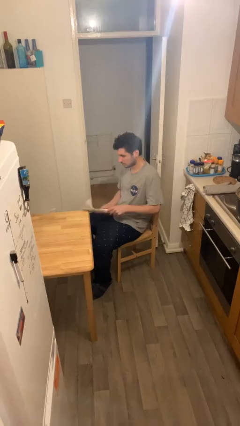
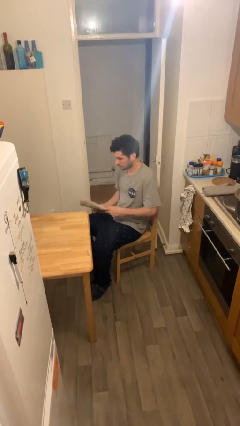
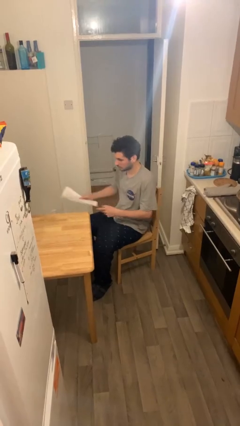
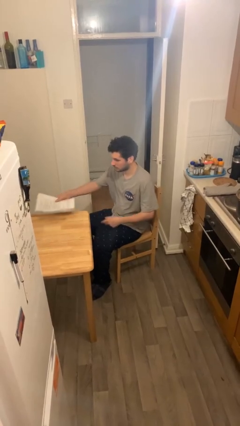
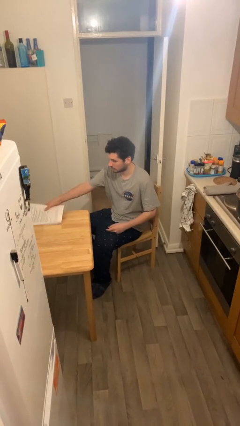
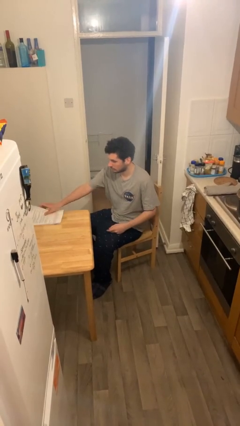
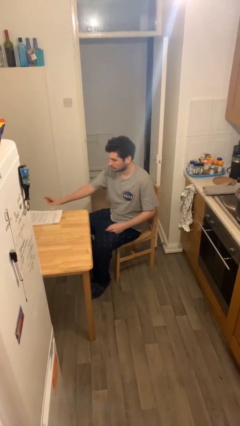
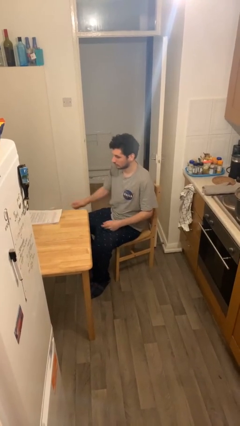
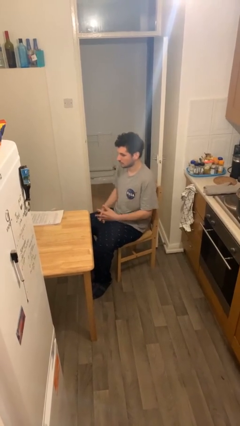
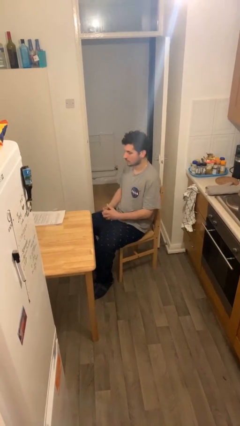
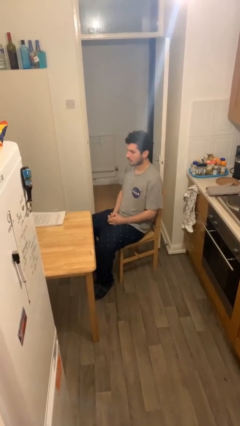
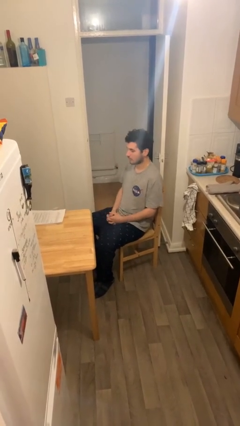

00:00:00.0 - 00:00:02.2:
person puts down object on table

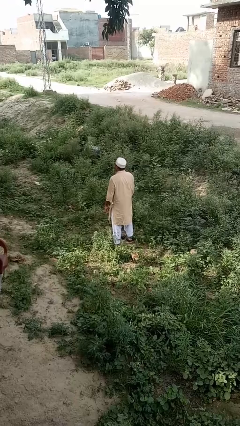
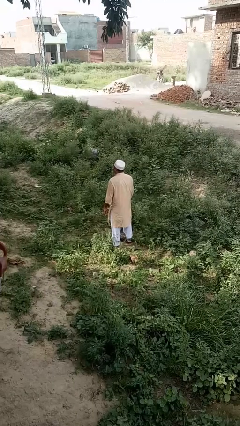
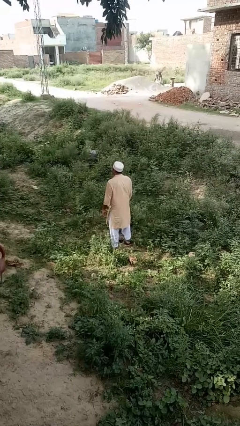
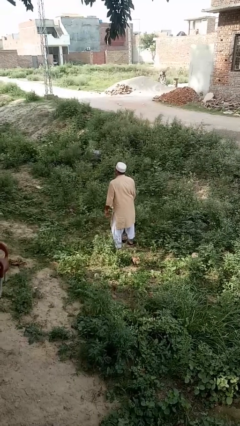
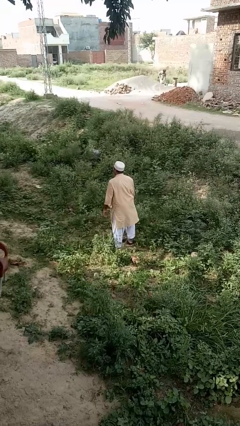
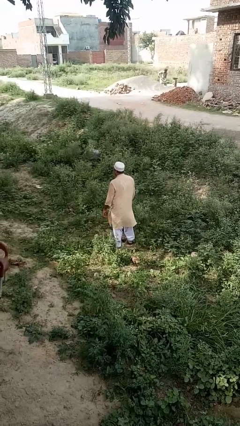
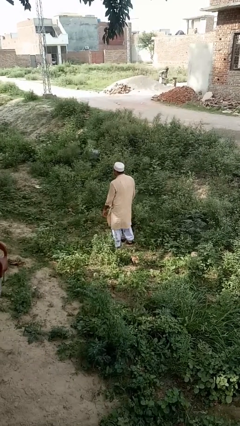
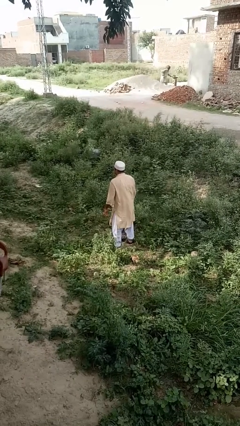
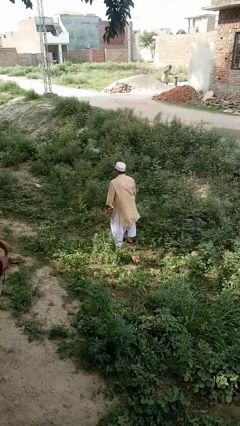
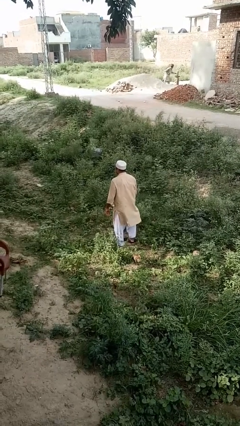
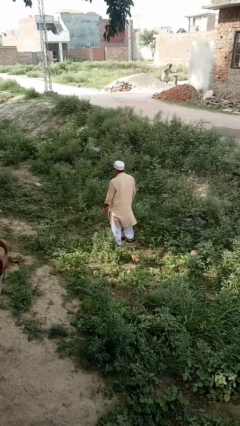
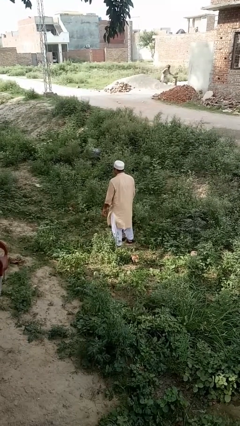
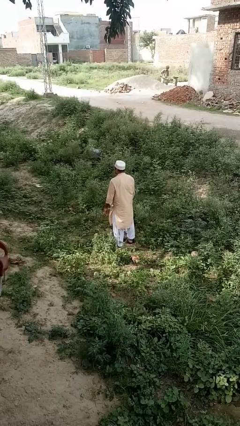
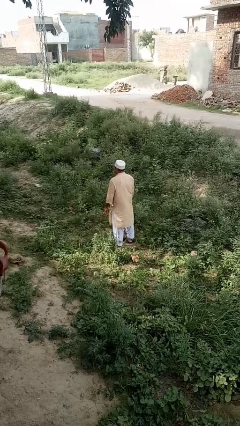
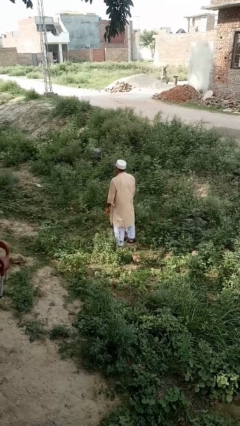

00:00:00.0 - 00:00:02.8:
person wiggles hips

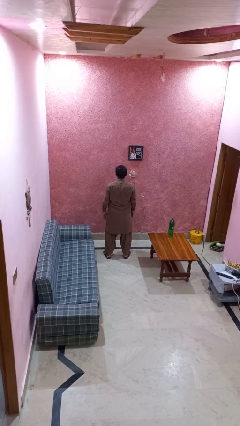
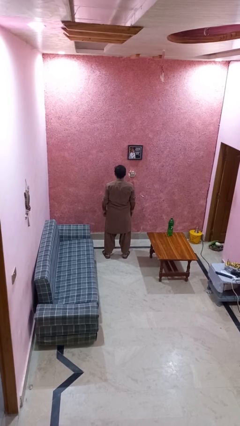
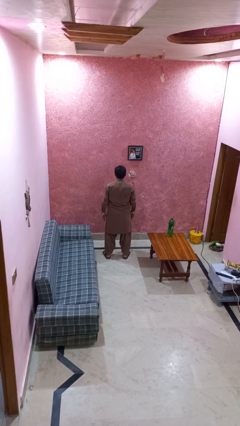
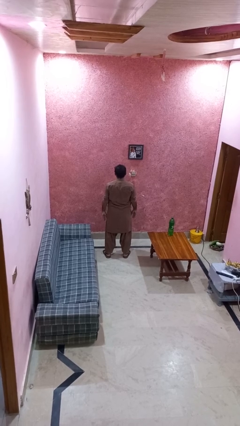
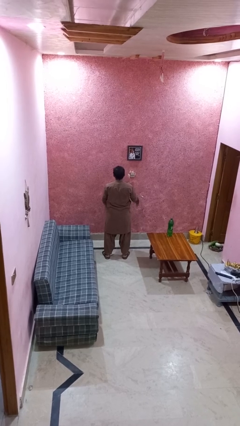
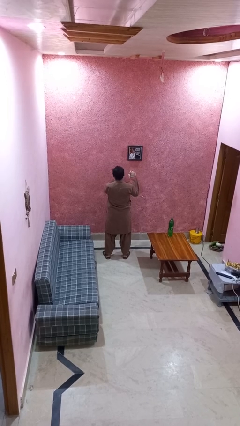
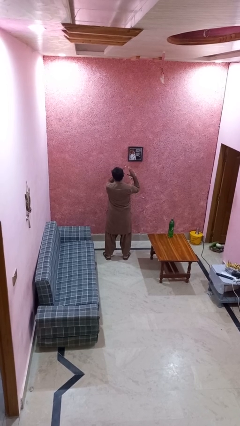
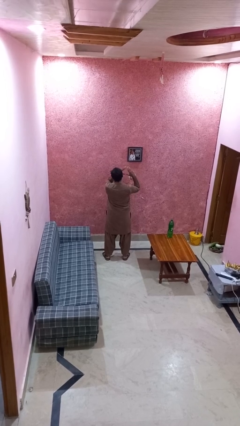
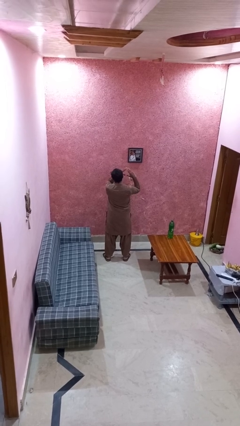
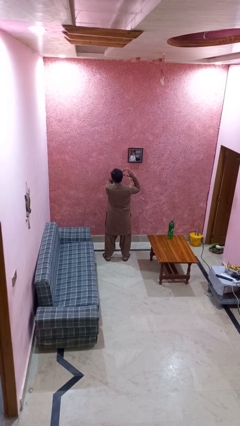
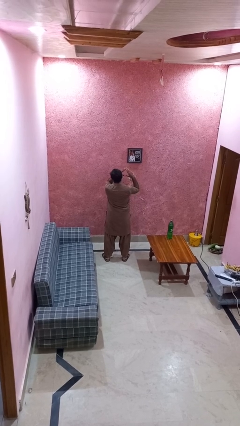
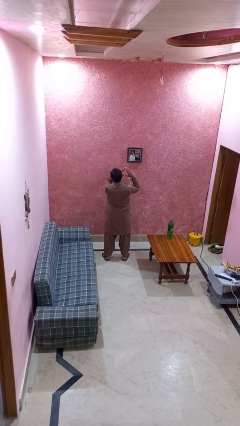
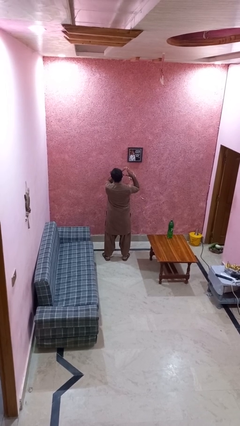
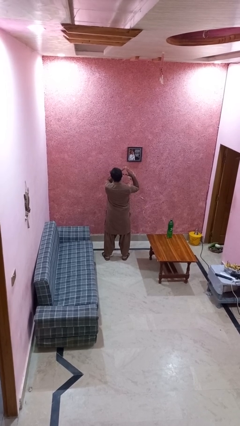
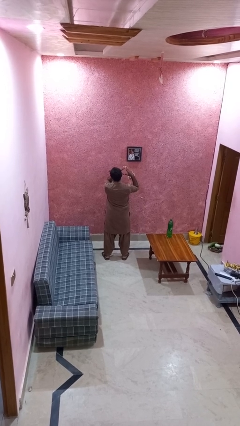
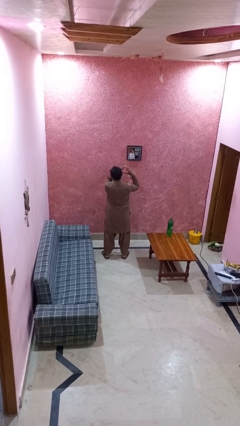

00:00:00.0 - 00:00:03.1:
person gestures heart

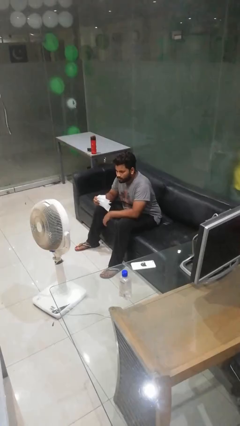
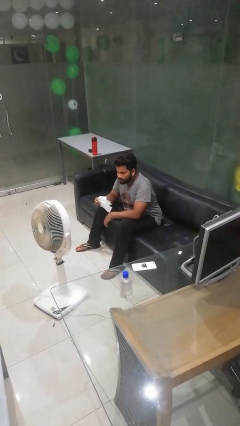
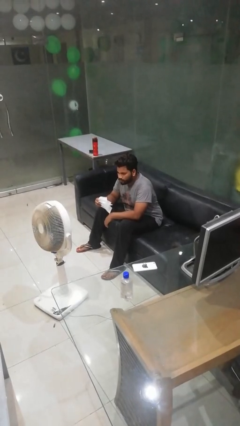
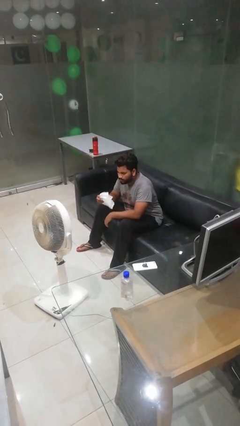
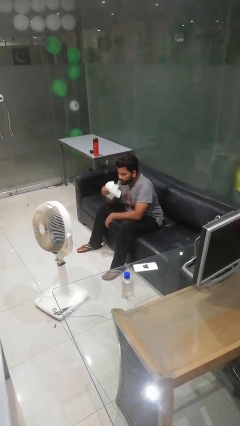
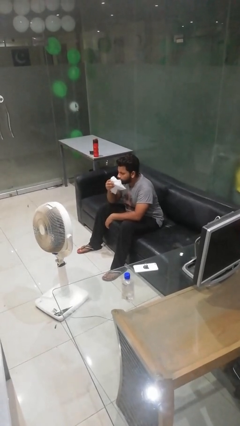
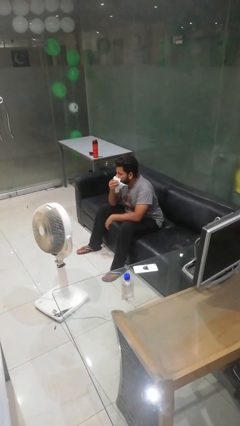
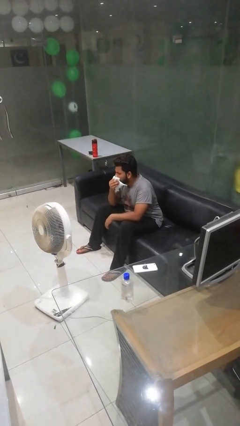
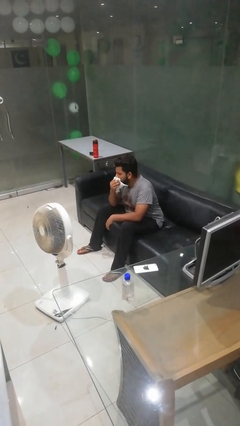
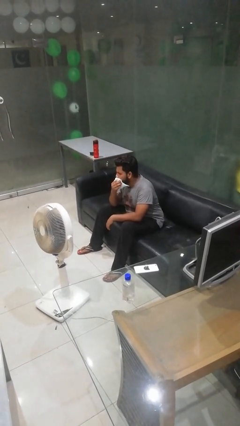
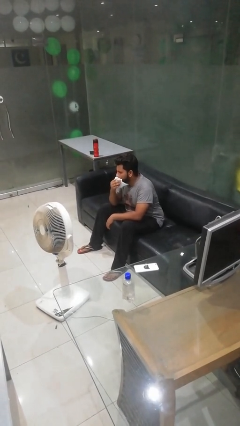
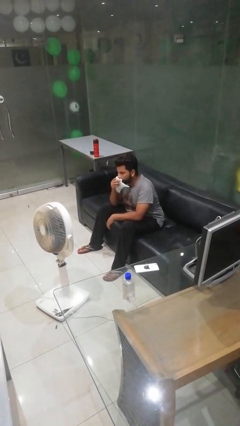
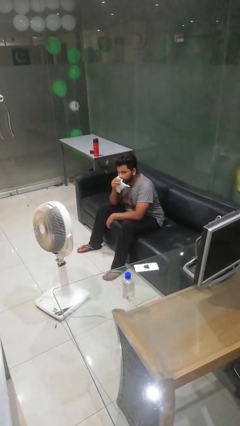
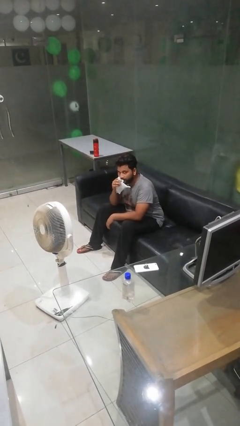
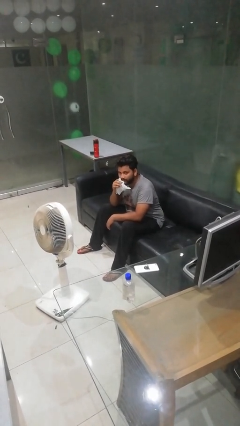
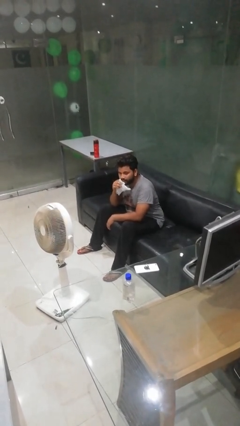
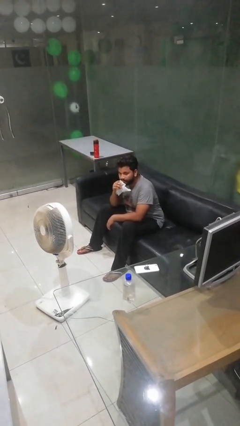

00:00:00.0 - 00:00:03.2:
person wipes mouth with napkin

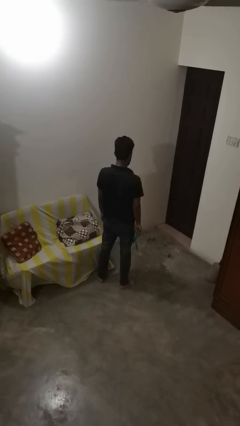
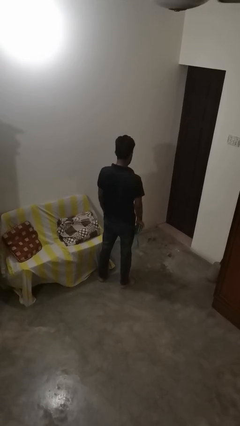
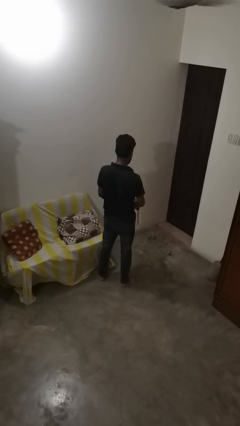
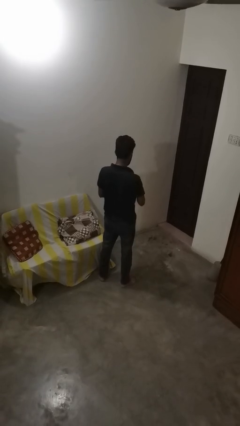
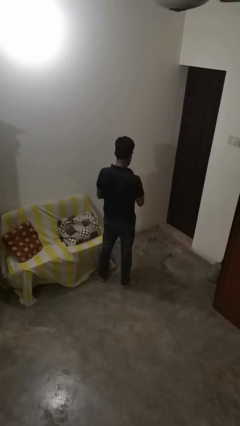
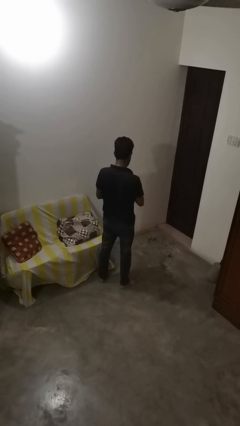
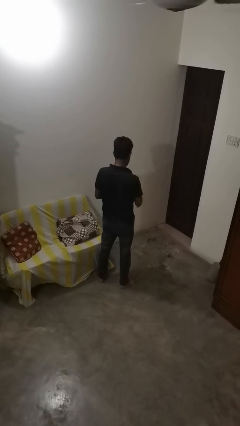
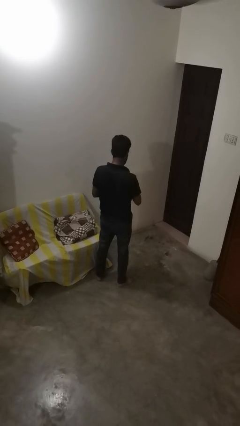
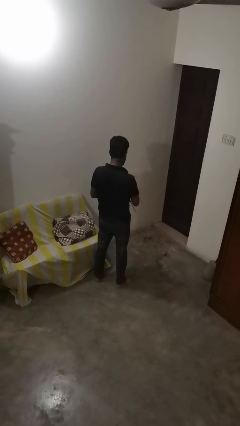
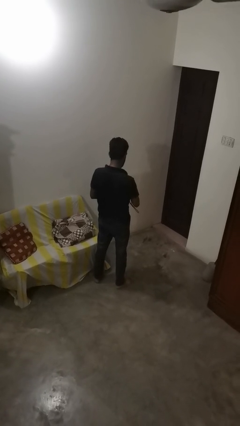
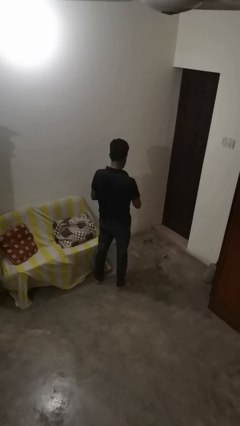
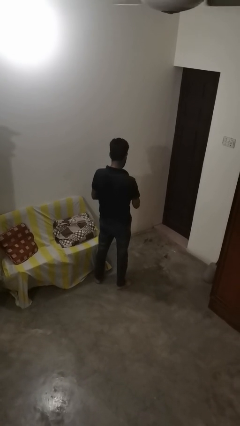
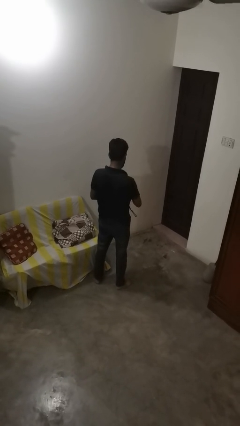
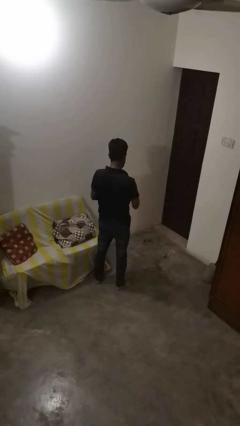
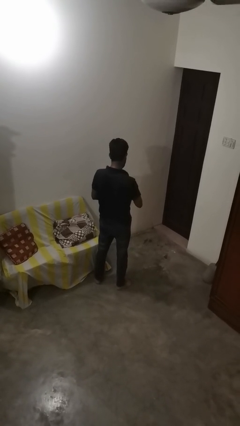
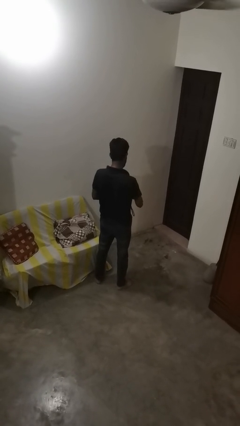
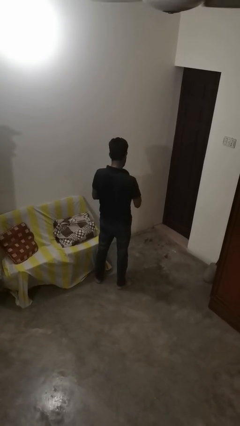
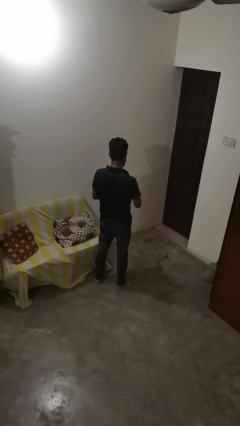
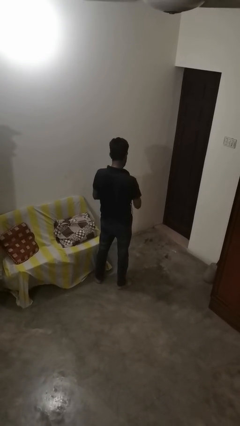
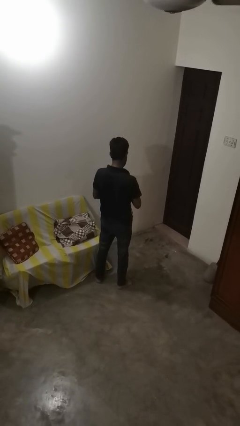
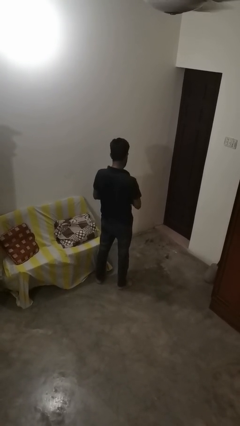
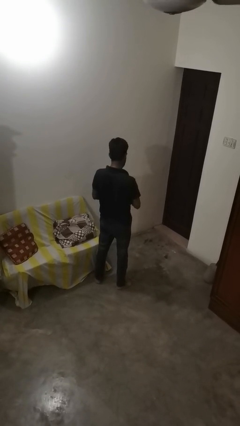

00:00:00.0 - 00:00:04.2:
person searches in bag

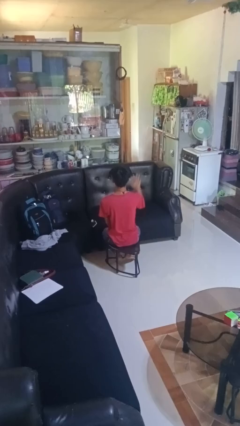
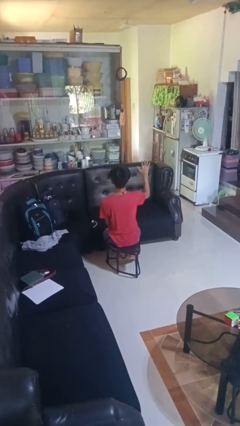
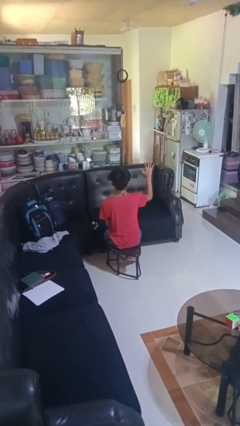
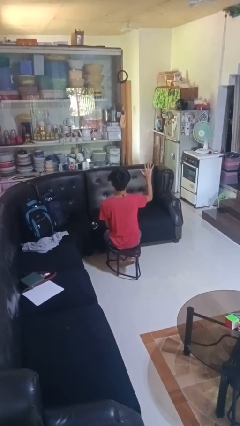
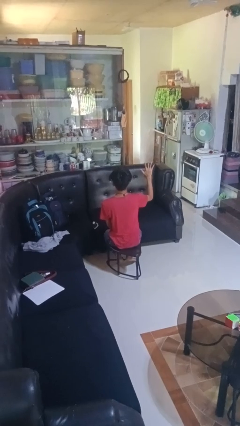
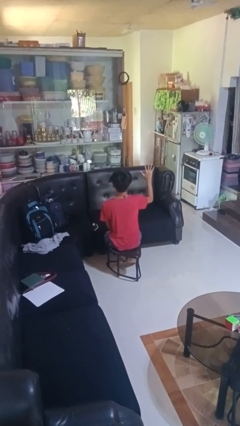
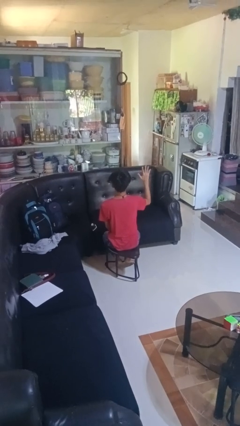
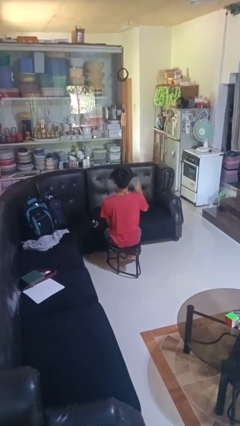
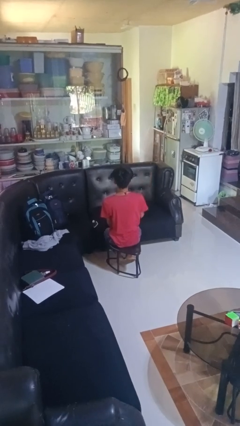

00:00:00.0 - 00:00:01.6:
person gestures number five
